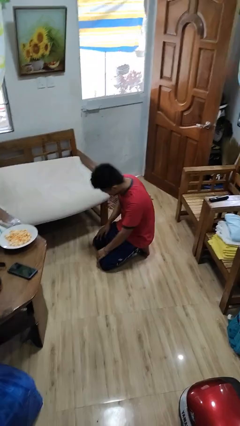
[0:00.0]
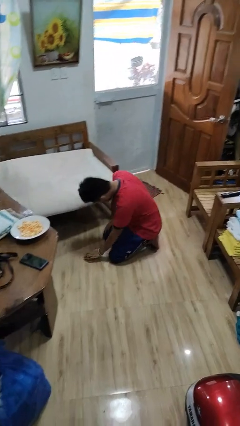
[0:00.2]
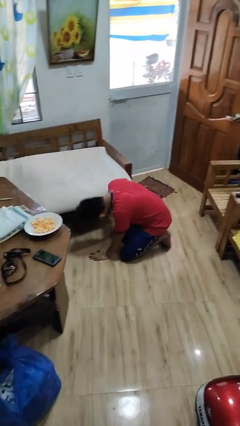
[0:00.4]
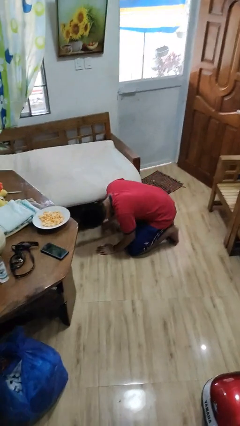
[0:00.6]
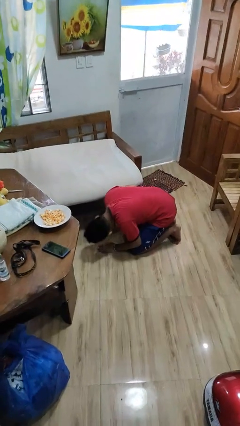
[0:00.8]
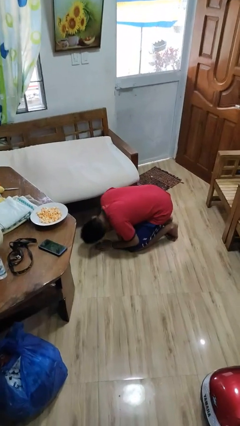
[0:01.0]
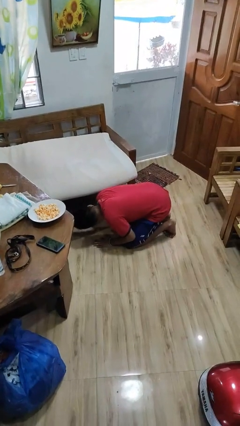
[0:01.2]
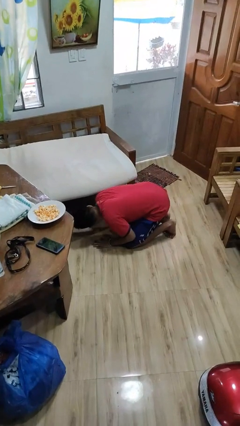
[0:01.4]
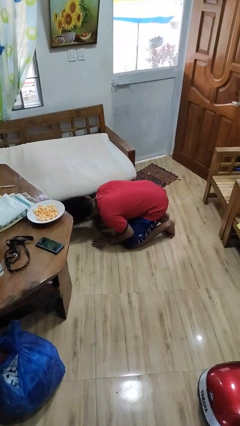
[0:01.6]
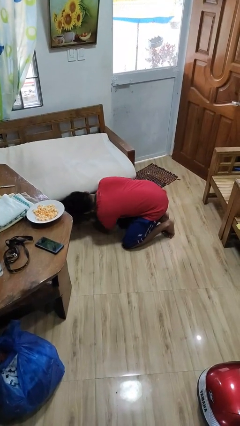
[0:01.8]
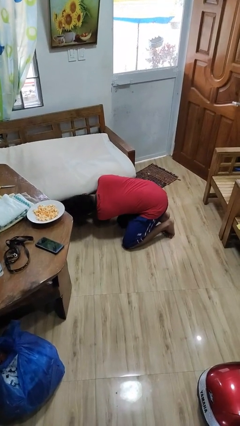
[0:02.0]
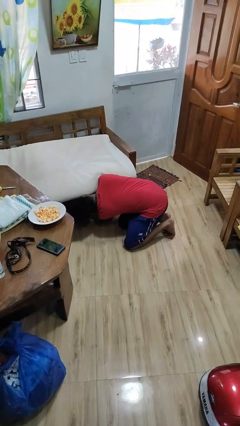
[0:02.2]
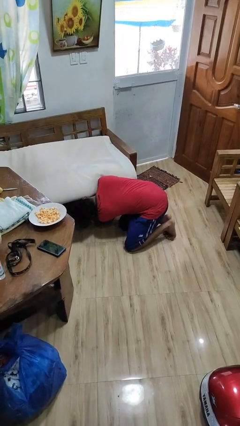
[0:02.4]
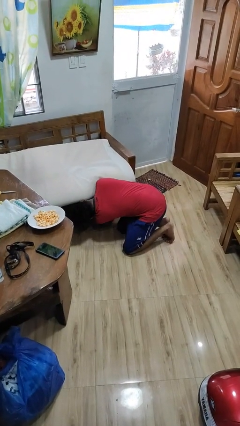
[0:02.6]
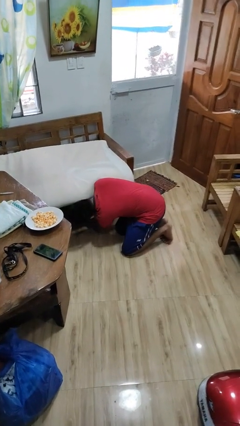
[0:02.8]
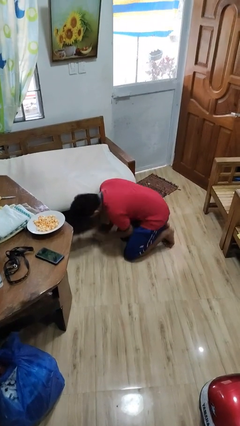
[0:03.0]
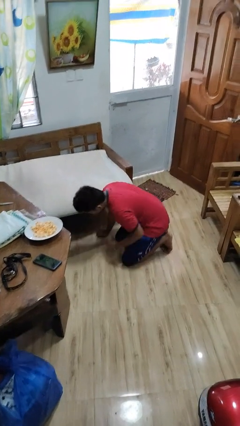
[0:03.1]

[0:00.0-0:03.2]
person searches under couch

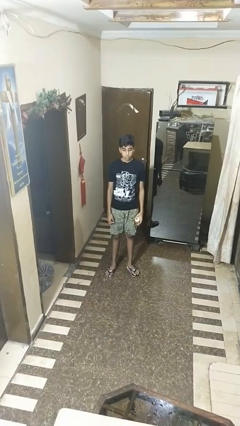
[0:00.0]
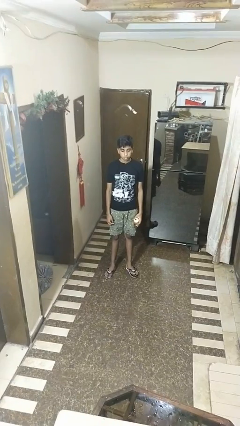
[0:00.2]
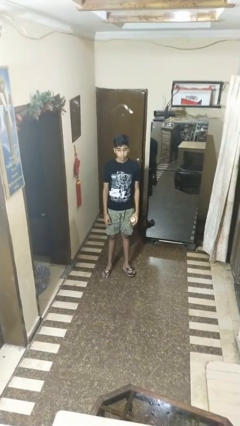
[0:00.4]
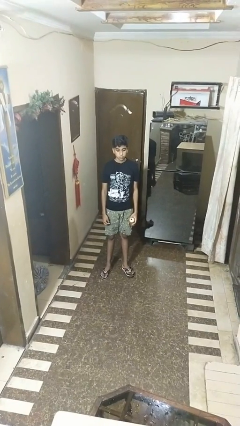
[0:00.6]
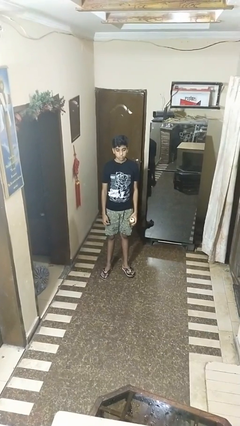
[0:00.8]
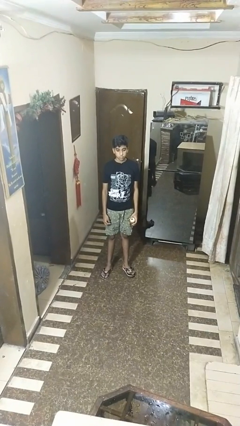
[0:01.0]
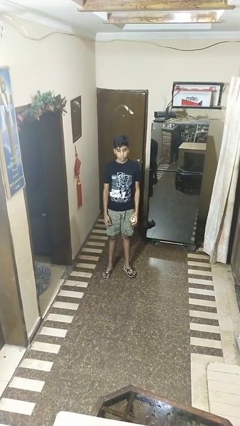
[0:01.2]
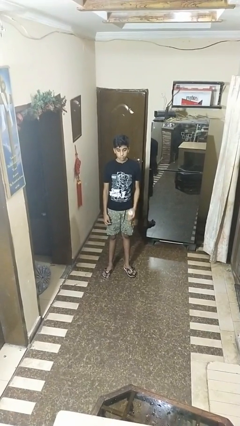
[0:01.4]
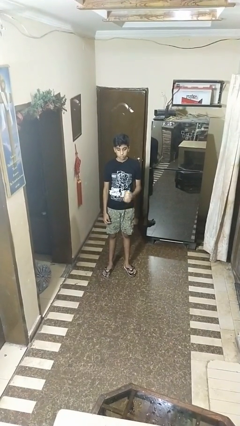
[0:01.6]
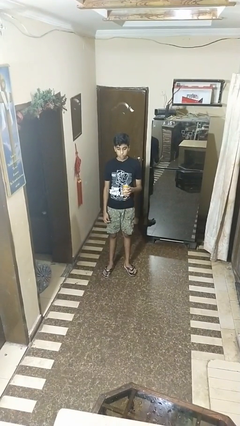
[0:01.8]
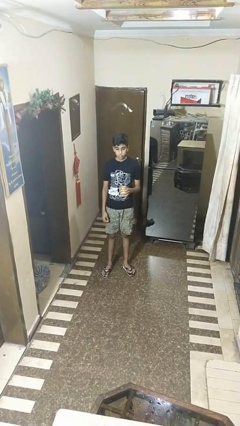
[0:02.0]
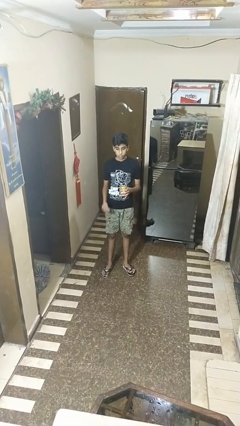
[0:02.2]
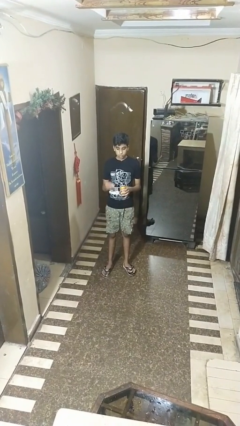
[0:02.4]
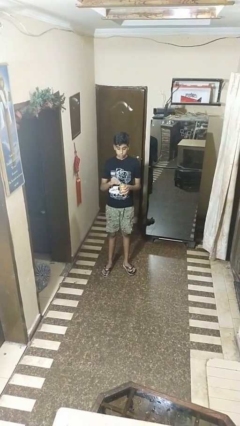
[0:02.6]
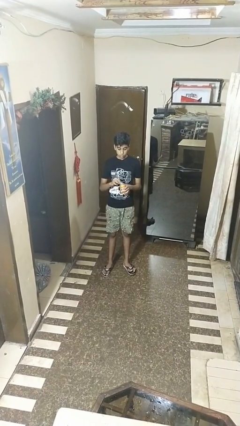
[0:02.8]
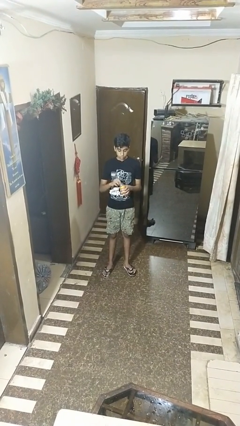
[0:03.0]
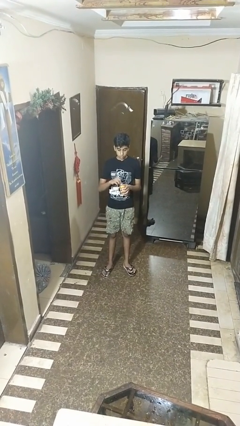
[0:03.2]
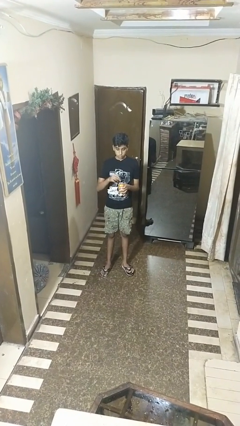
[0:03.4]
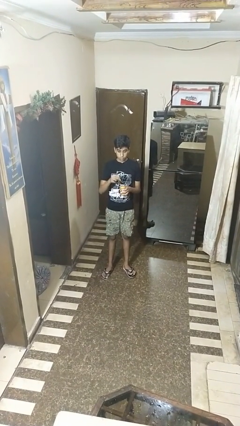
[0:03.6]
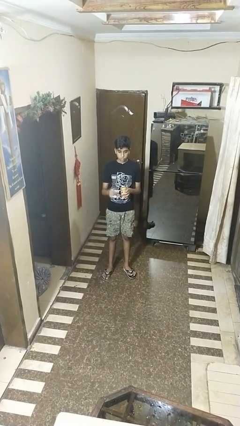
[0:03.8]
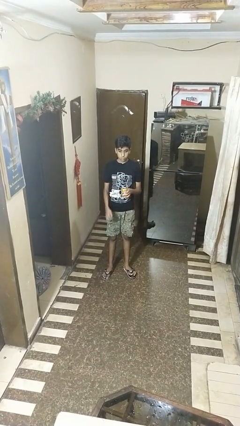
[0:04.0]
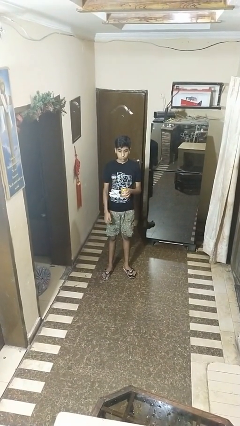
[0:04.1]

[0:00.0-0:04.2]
person opens beverage can

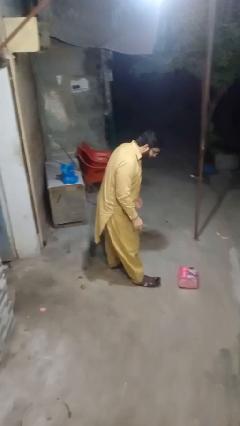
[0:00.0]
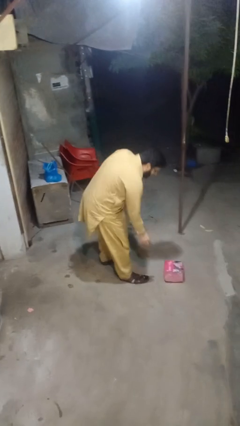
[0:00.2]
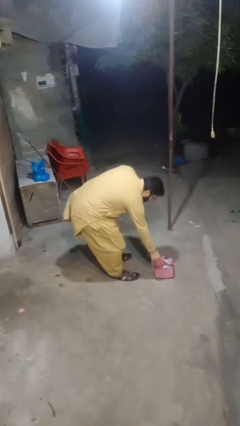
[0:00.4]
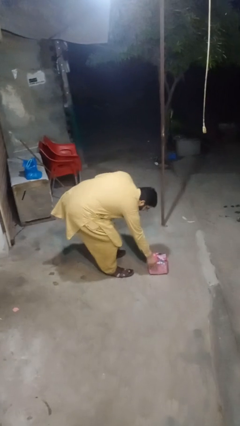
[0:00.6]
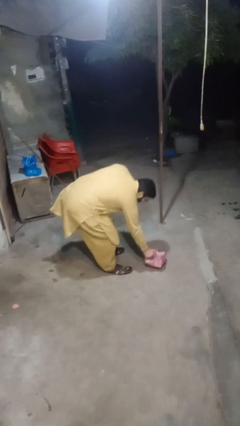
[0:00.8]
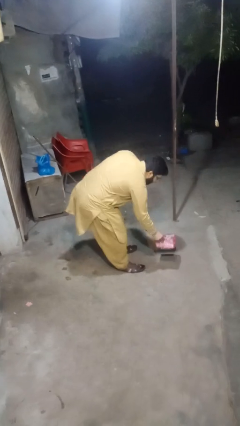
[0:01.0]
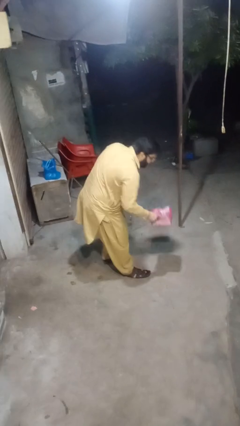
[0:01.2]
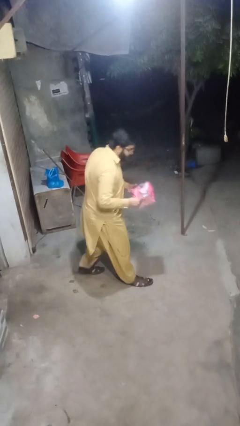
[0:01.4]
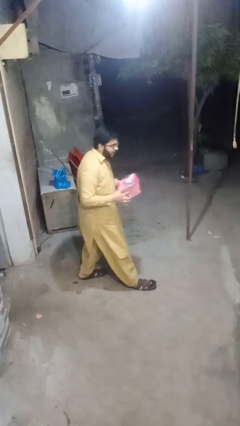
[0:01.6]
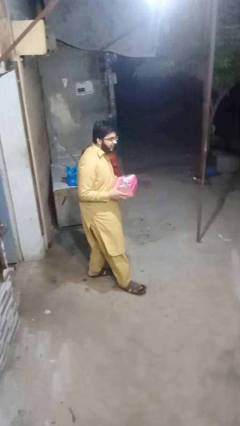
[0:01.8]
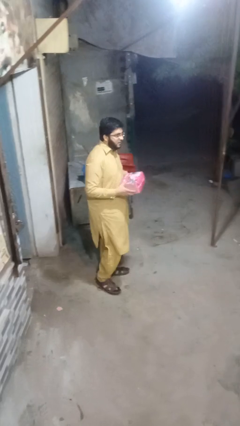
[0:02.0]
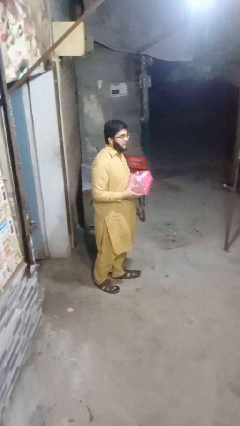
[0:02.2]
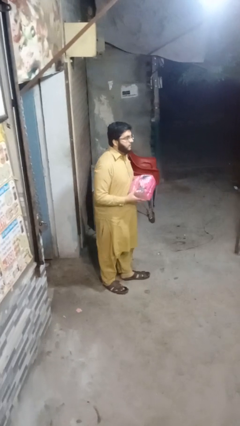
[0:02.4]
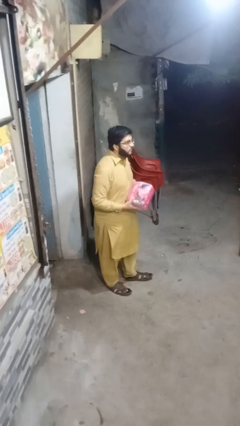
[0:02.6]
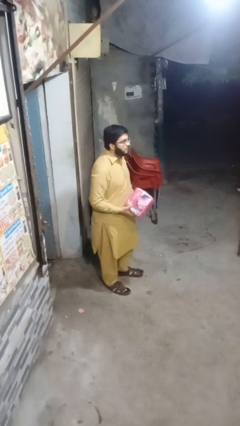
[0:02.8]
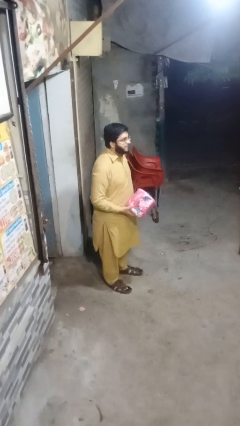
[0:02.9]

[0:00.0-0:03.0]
person picks up object from floor

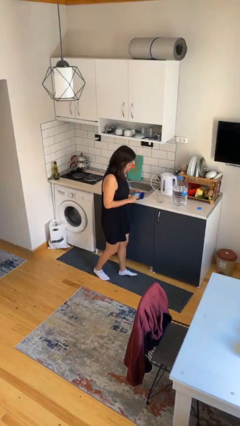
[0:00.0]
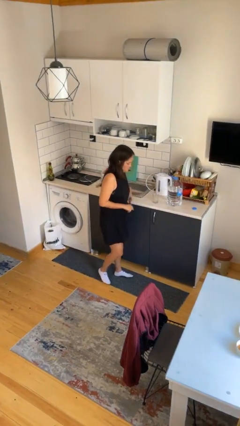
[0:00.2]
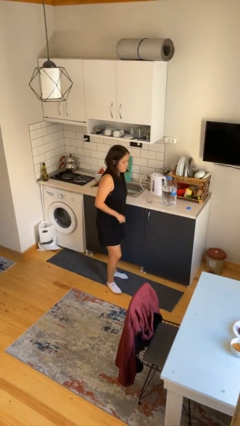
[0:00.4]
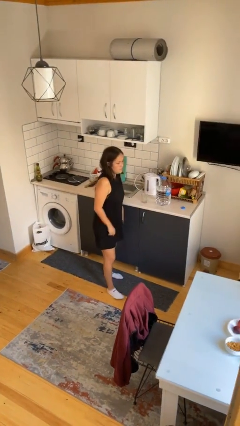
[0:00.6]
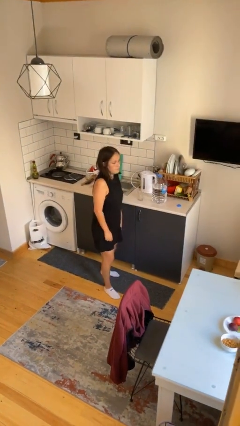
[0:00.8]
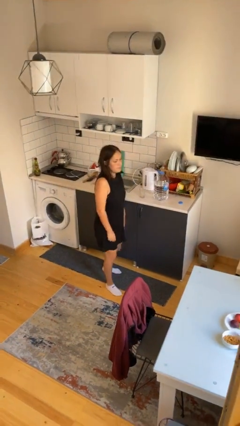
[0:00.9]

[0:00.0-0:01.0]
person puts phone into pocket

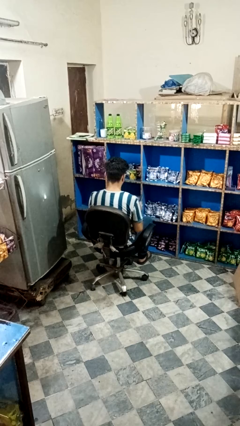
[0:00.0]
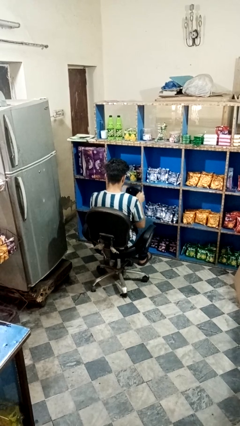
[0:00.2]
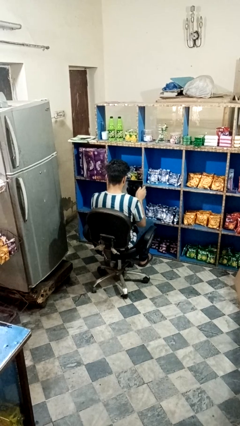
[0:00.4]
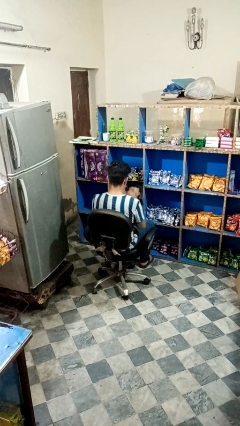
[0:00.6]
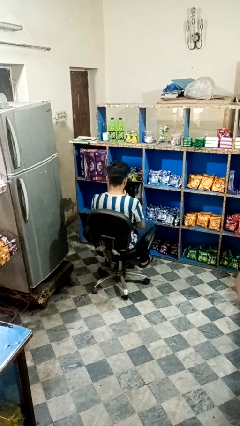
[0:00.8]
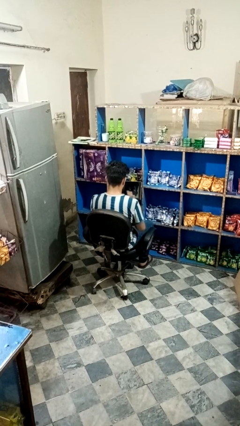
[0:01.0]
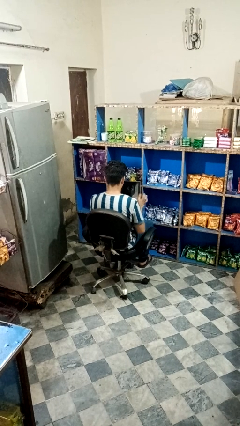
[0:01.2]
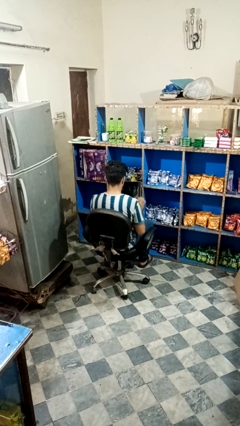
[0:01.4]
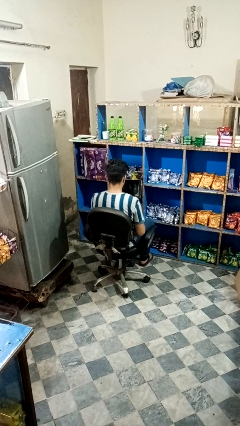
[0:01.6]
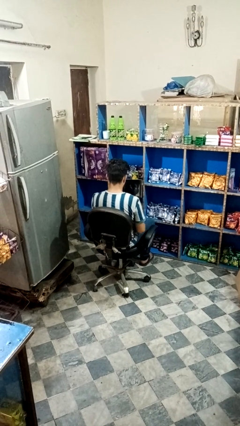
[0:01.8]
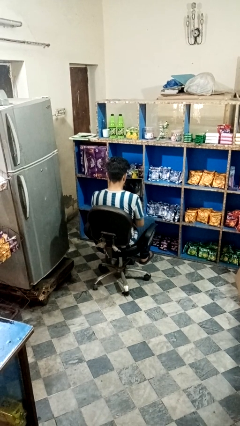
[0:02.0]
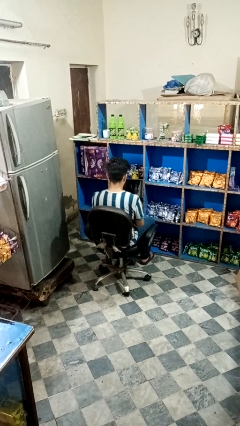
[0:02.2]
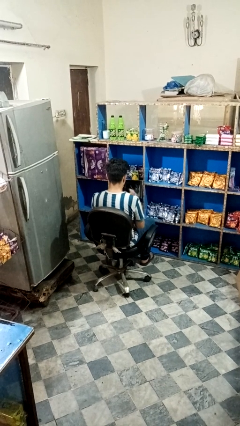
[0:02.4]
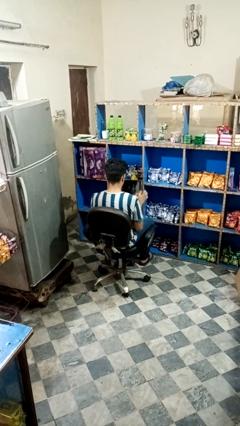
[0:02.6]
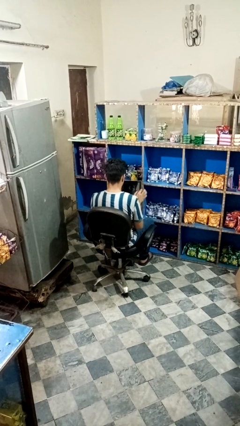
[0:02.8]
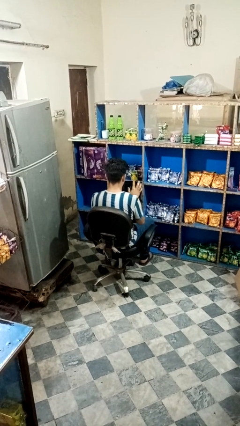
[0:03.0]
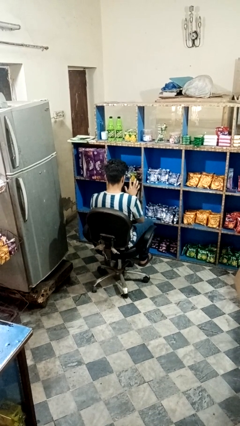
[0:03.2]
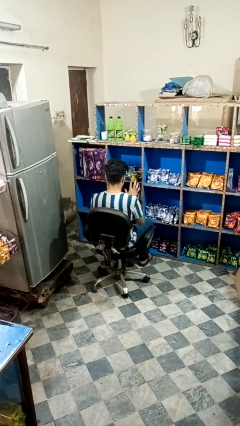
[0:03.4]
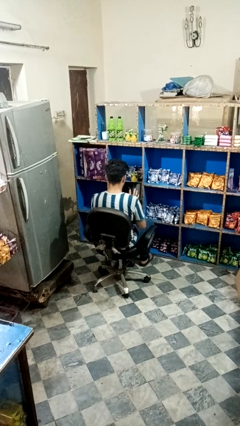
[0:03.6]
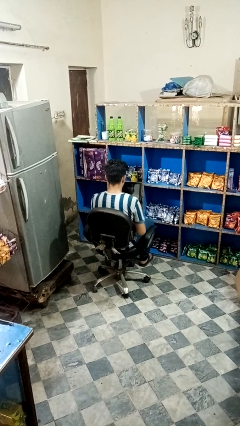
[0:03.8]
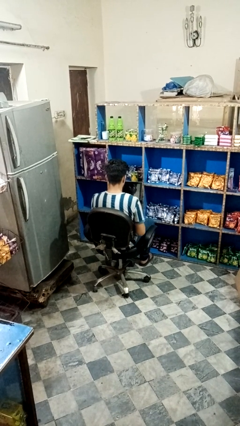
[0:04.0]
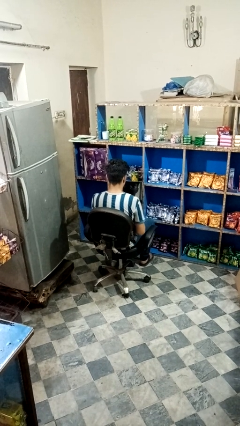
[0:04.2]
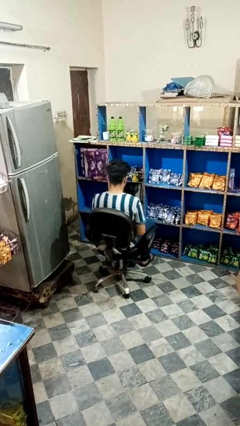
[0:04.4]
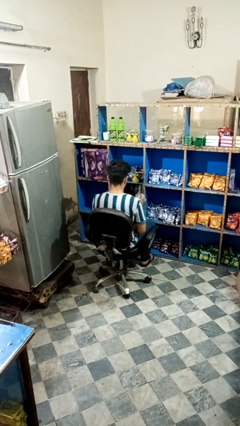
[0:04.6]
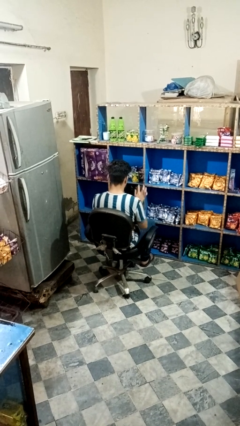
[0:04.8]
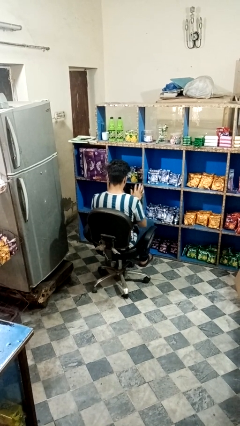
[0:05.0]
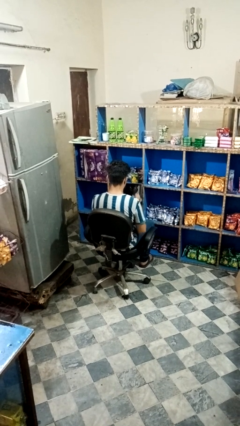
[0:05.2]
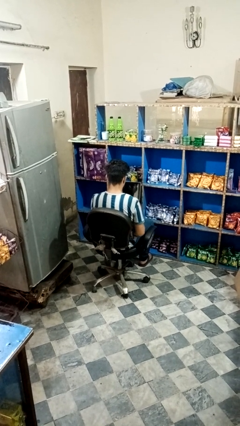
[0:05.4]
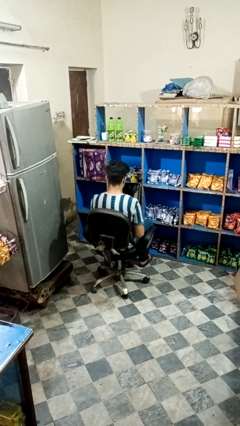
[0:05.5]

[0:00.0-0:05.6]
person interacts with tablet

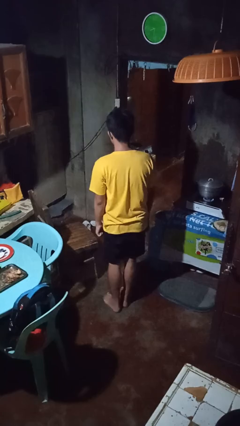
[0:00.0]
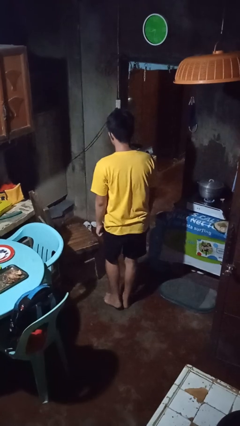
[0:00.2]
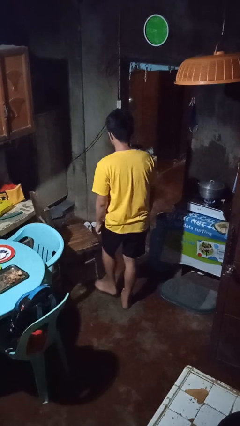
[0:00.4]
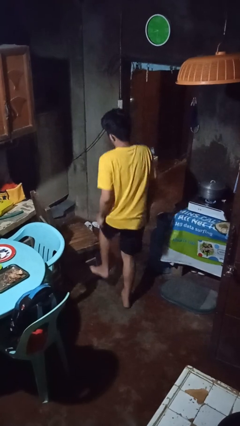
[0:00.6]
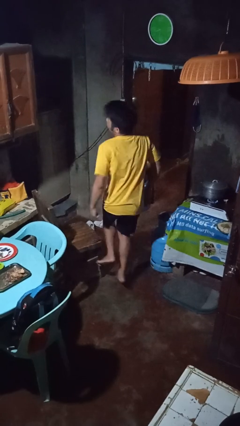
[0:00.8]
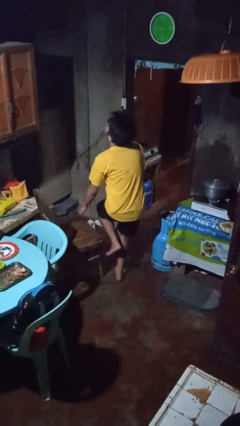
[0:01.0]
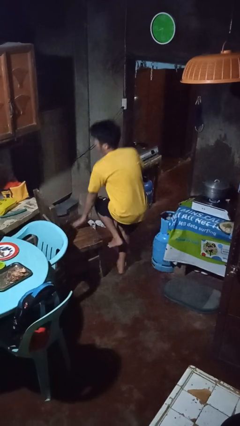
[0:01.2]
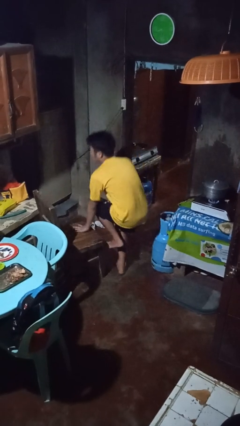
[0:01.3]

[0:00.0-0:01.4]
person trips on object on floor
